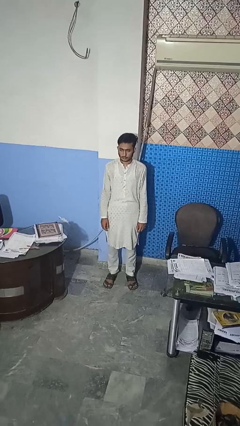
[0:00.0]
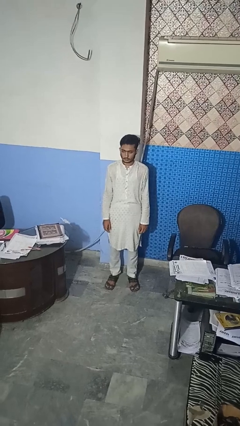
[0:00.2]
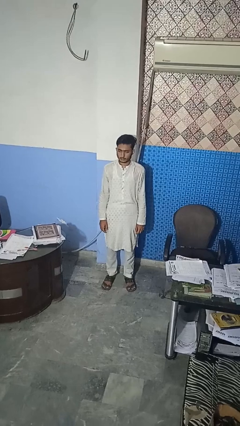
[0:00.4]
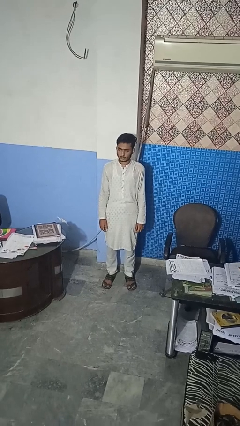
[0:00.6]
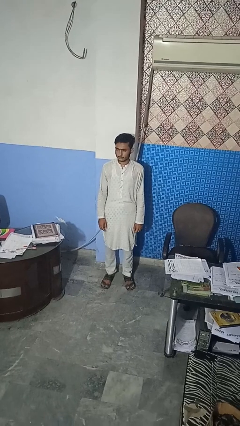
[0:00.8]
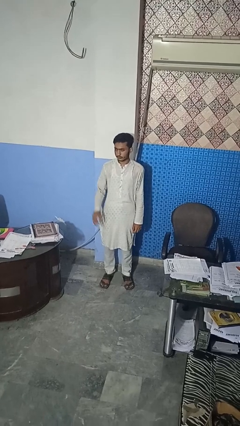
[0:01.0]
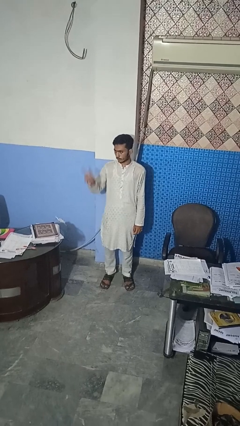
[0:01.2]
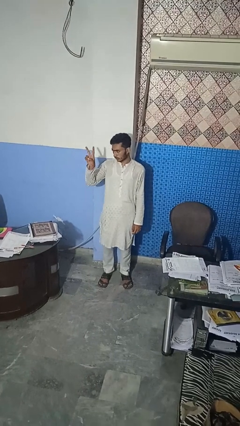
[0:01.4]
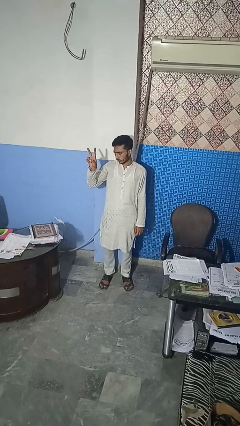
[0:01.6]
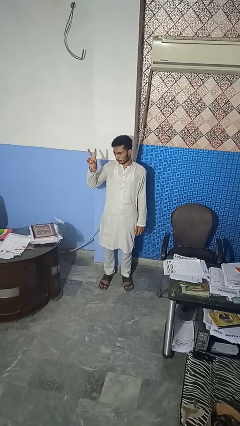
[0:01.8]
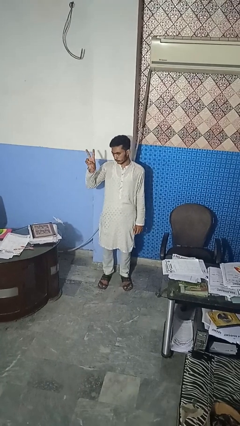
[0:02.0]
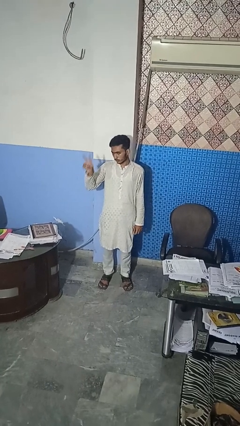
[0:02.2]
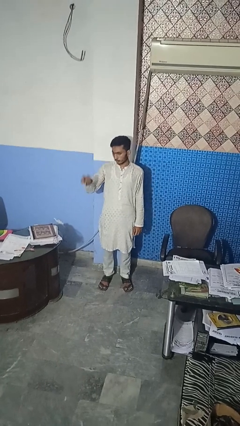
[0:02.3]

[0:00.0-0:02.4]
person gestures peace

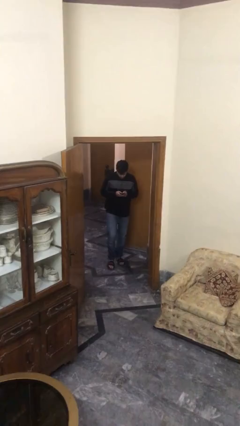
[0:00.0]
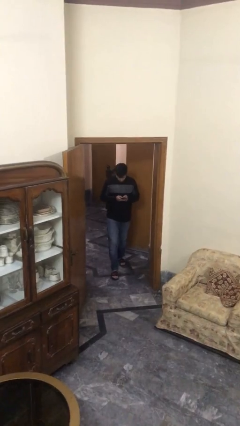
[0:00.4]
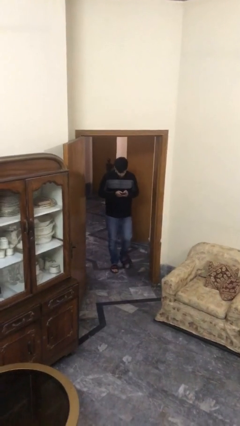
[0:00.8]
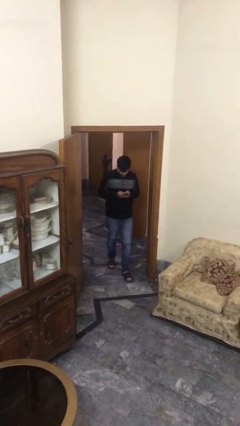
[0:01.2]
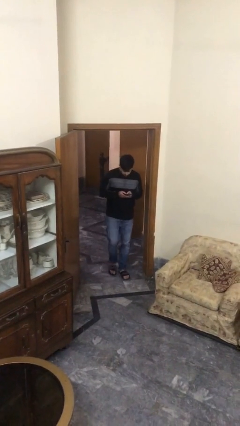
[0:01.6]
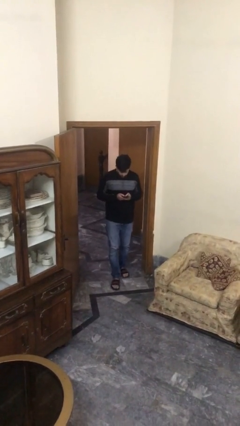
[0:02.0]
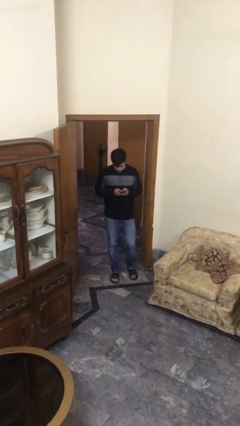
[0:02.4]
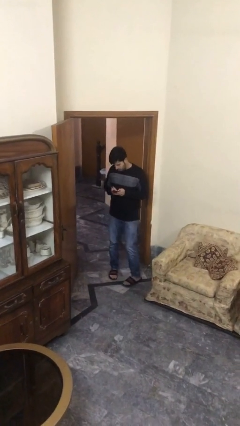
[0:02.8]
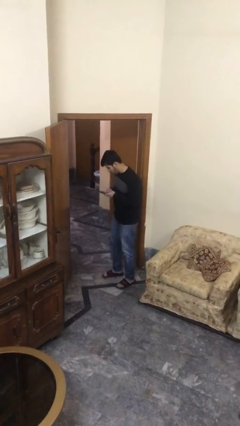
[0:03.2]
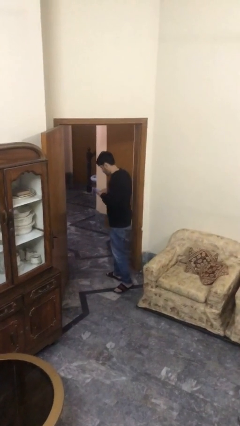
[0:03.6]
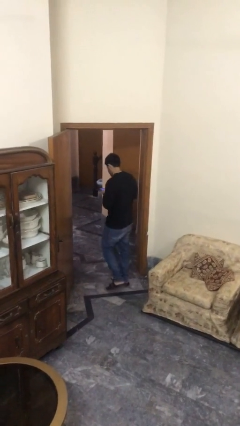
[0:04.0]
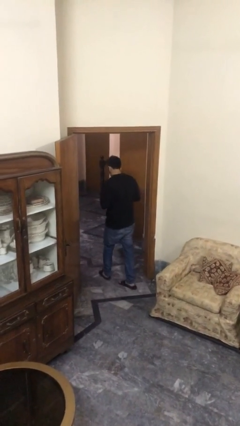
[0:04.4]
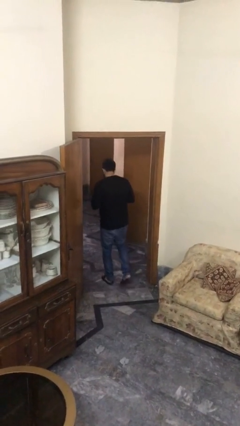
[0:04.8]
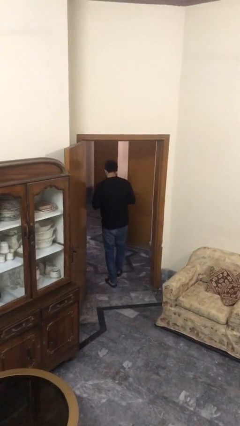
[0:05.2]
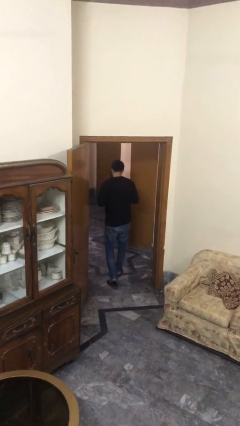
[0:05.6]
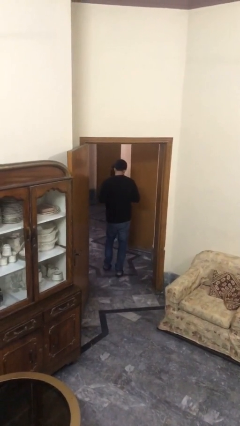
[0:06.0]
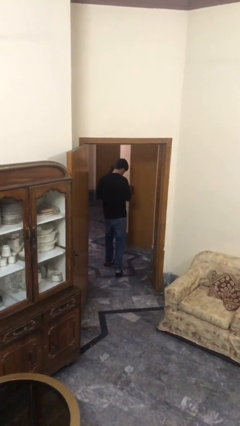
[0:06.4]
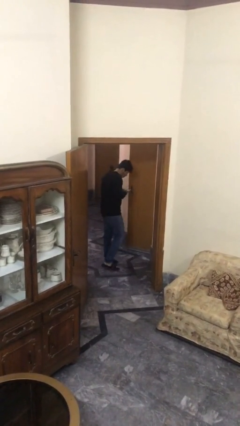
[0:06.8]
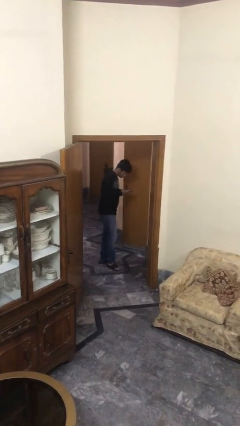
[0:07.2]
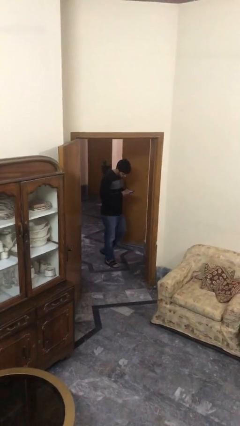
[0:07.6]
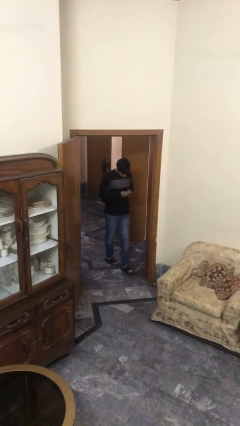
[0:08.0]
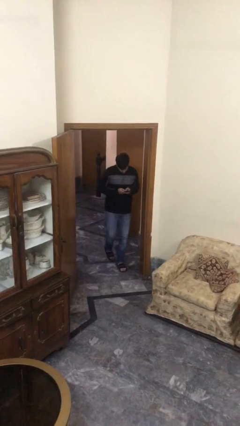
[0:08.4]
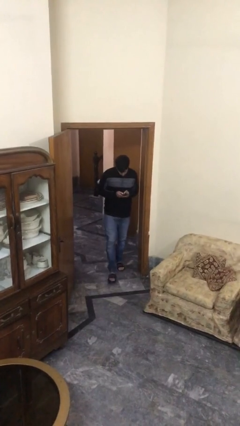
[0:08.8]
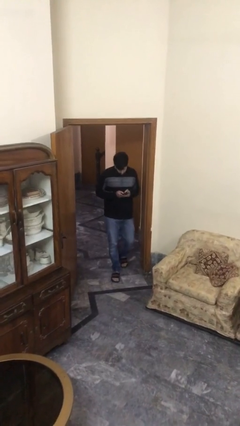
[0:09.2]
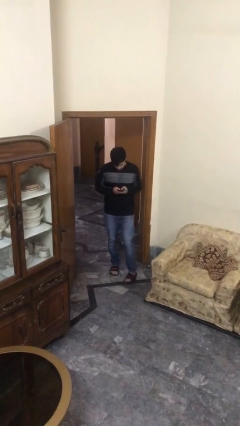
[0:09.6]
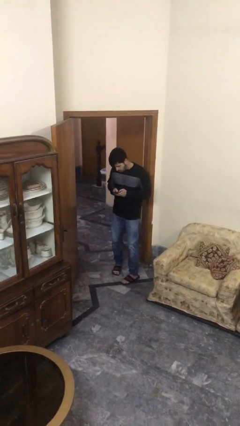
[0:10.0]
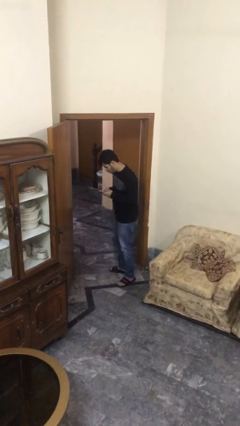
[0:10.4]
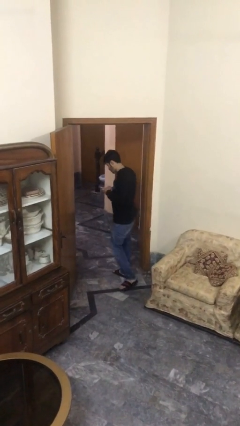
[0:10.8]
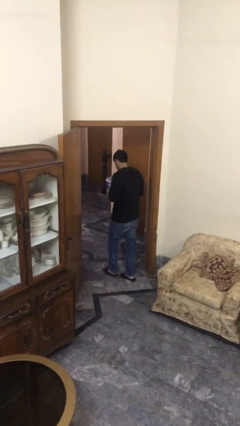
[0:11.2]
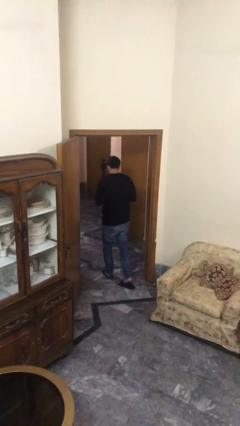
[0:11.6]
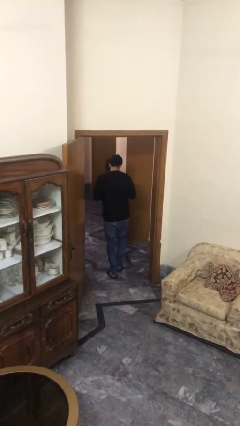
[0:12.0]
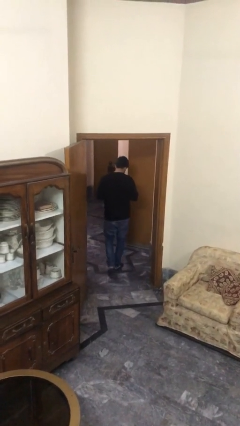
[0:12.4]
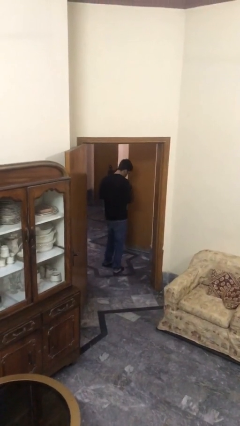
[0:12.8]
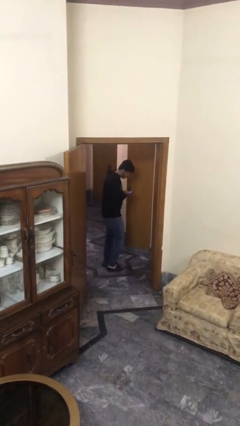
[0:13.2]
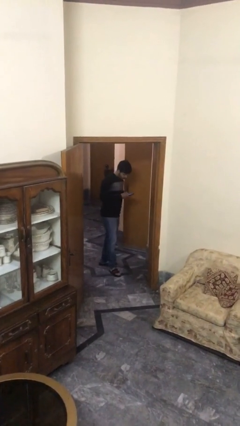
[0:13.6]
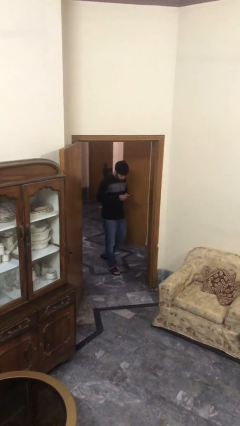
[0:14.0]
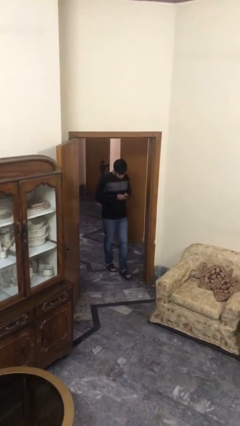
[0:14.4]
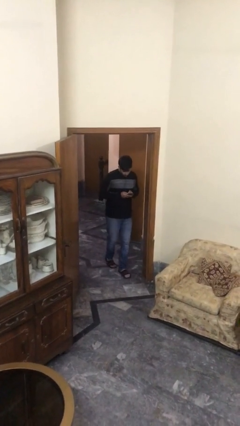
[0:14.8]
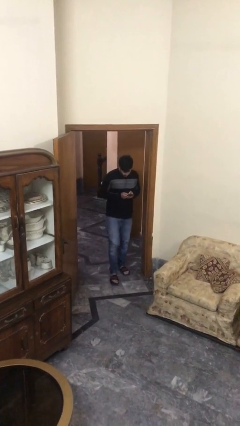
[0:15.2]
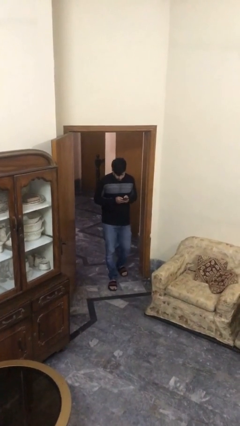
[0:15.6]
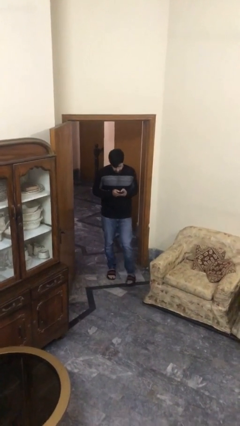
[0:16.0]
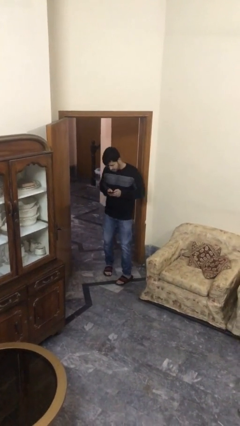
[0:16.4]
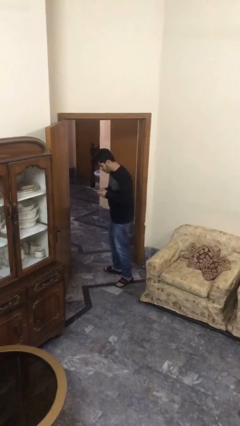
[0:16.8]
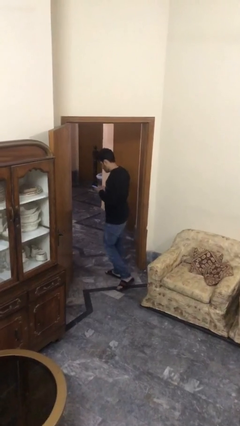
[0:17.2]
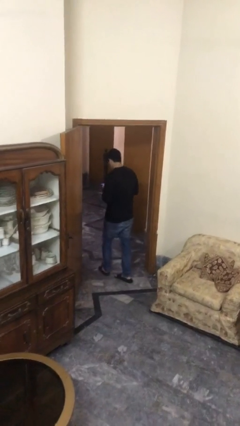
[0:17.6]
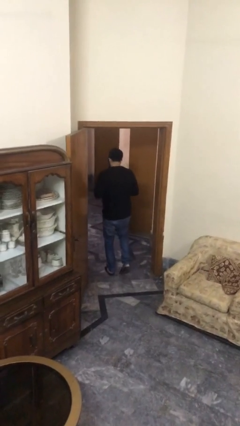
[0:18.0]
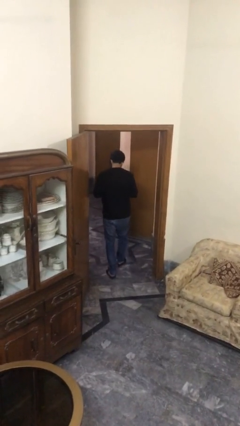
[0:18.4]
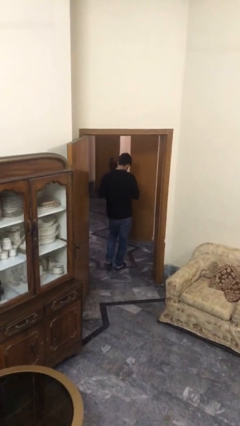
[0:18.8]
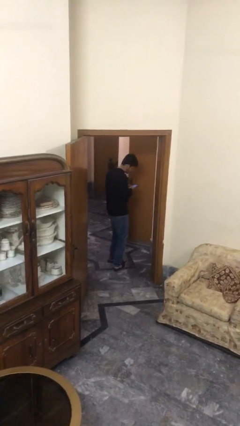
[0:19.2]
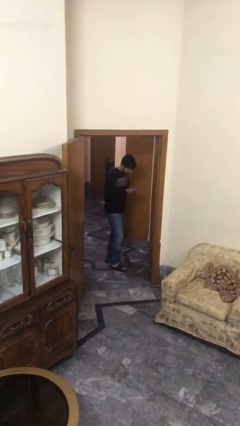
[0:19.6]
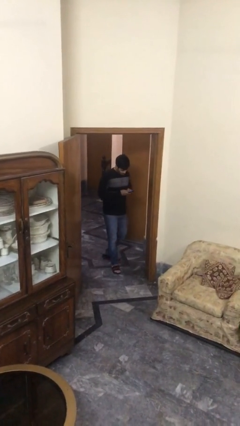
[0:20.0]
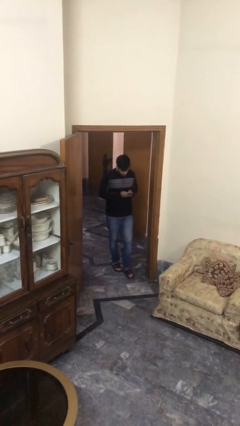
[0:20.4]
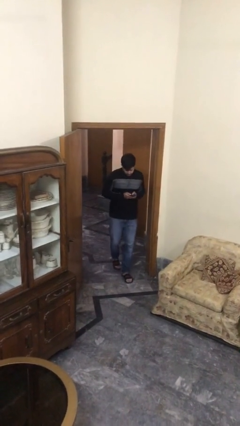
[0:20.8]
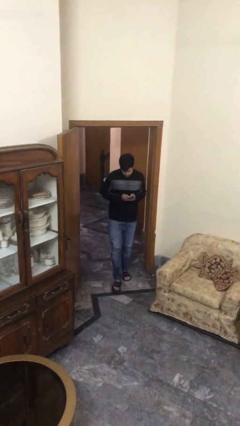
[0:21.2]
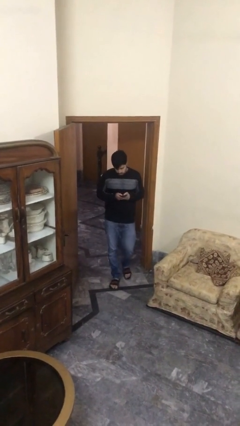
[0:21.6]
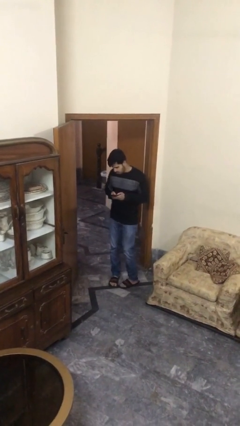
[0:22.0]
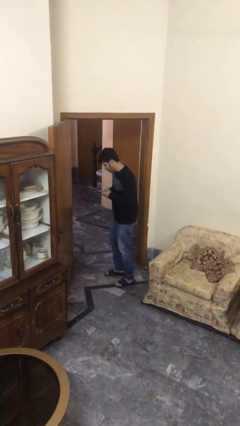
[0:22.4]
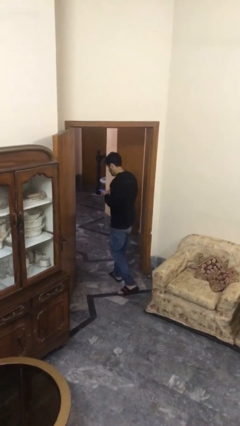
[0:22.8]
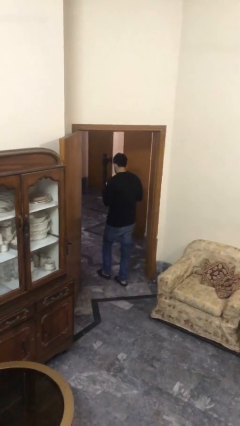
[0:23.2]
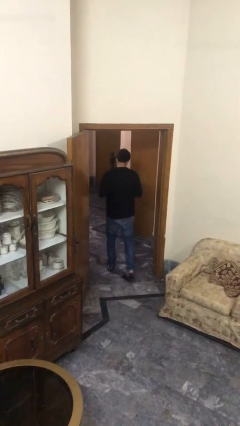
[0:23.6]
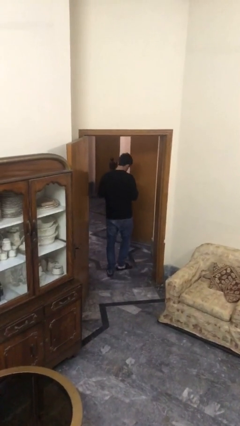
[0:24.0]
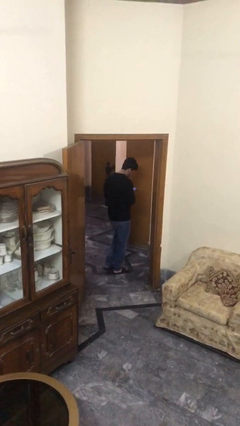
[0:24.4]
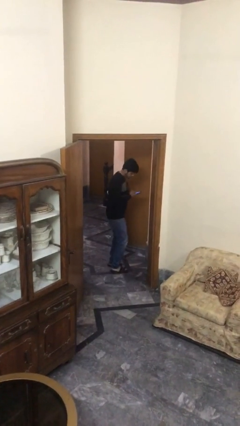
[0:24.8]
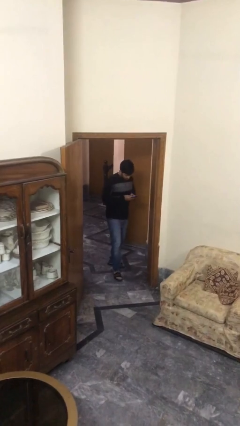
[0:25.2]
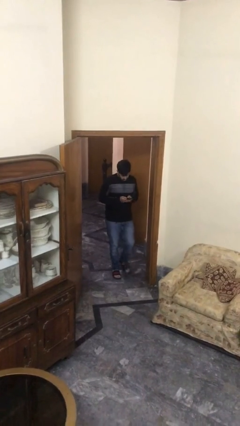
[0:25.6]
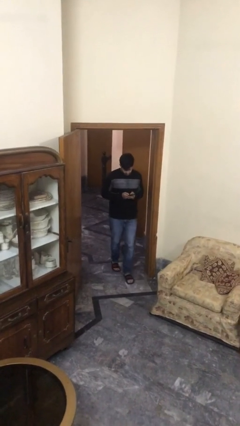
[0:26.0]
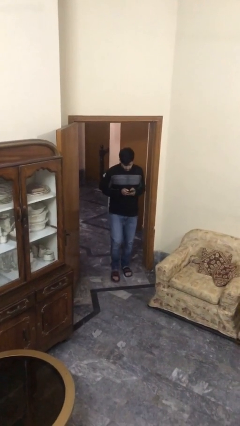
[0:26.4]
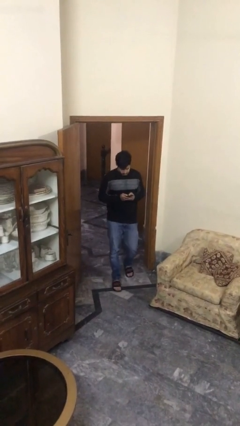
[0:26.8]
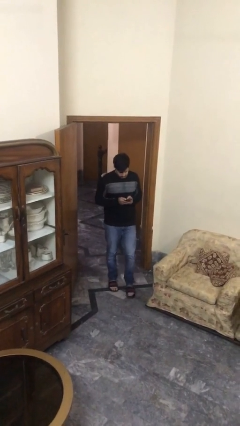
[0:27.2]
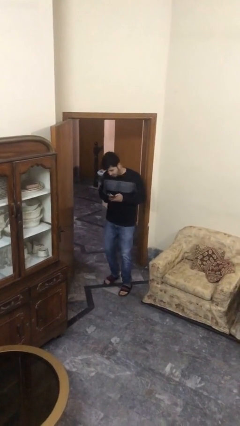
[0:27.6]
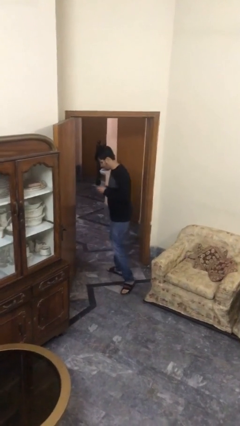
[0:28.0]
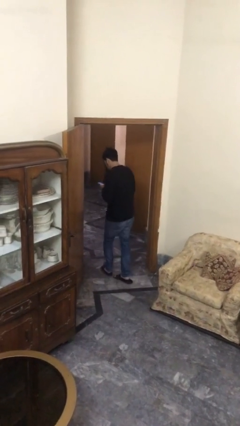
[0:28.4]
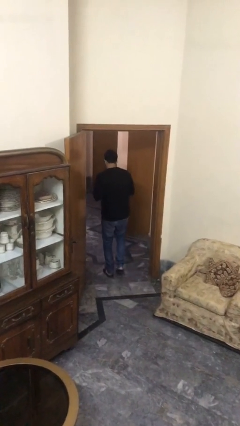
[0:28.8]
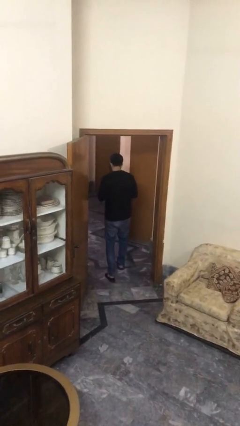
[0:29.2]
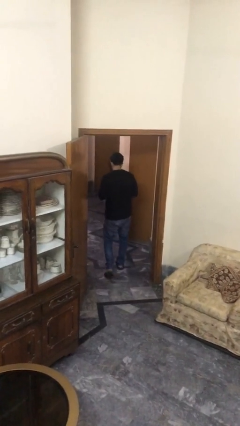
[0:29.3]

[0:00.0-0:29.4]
person texts on phone

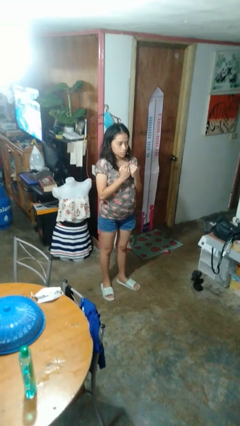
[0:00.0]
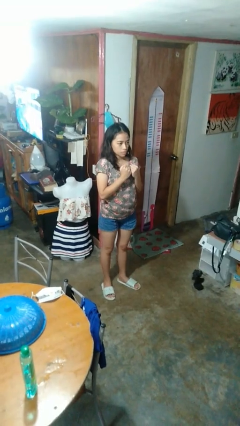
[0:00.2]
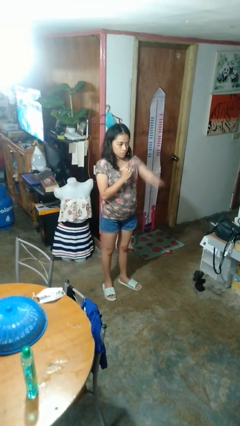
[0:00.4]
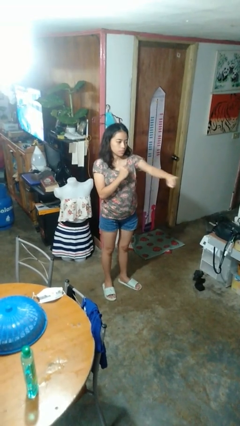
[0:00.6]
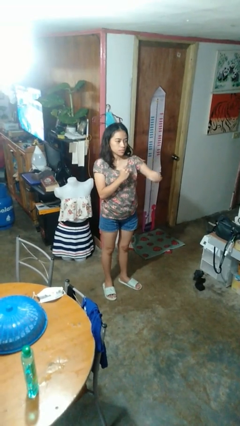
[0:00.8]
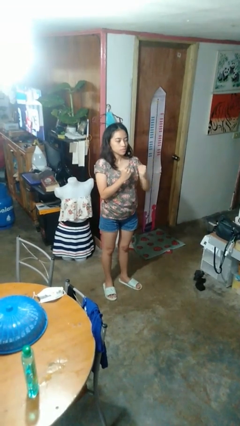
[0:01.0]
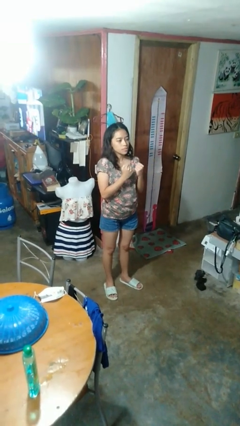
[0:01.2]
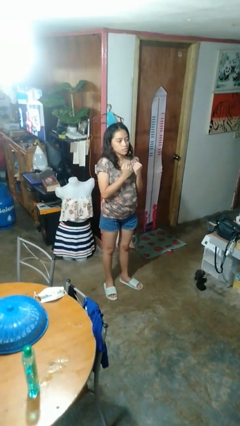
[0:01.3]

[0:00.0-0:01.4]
person punches
